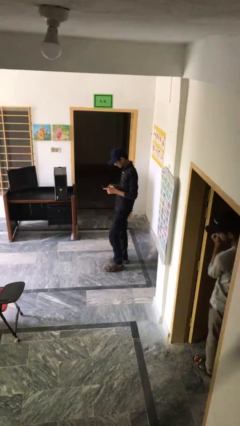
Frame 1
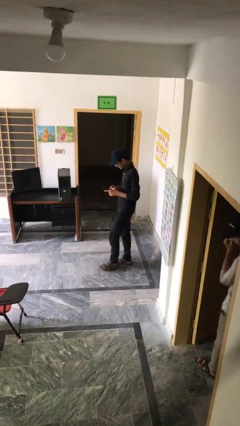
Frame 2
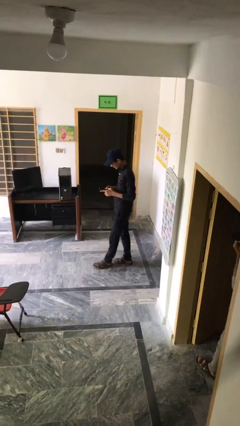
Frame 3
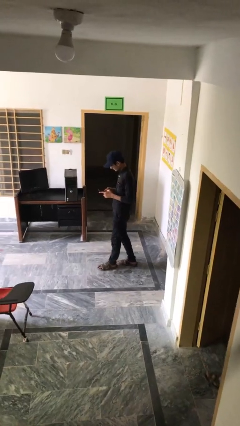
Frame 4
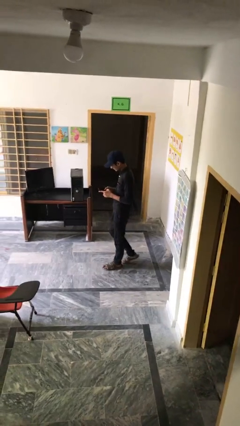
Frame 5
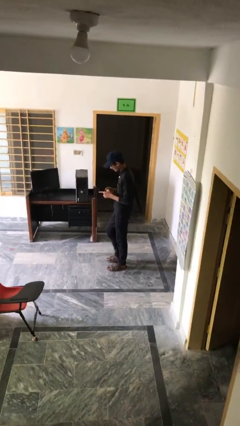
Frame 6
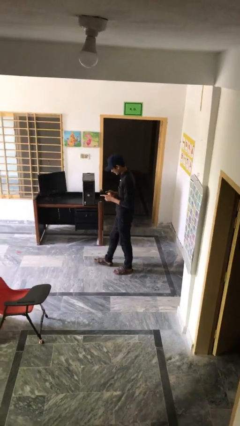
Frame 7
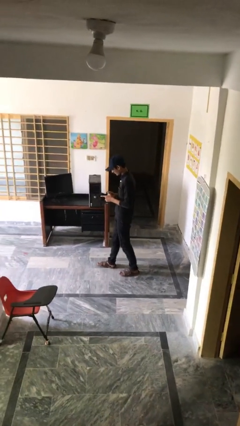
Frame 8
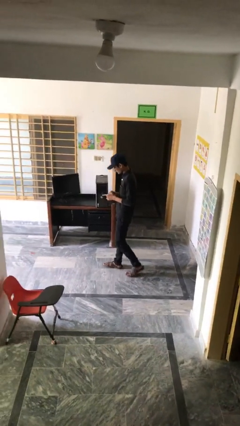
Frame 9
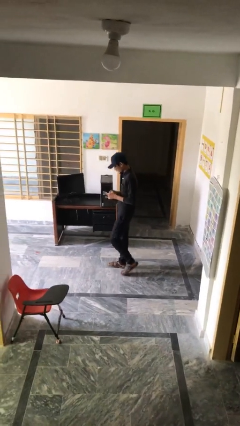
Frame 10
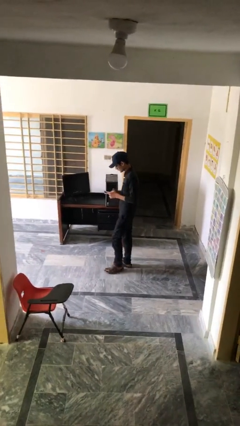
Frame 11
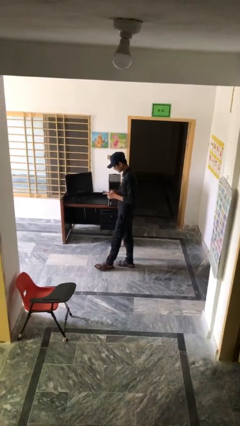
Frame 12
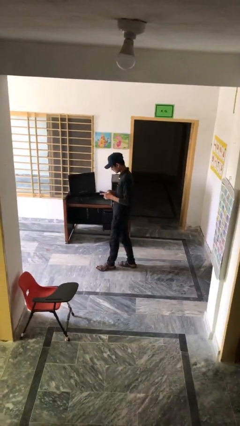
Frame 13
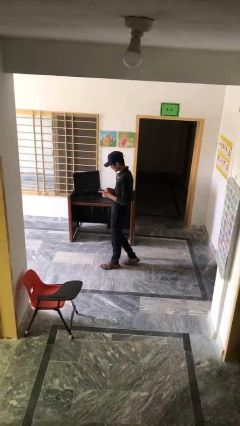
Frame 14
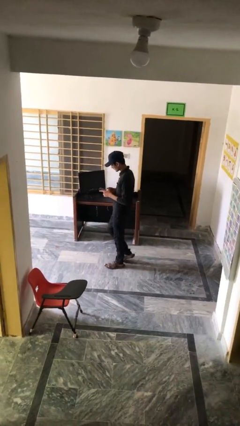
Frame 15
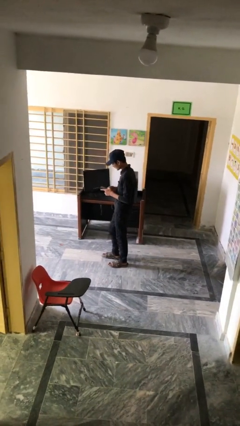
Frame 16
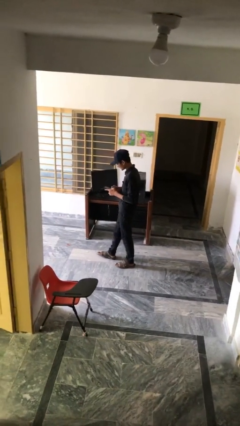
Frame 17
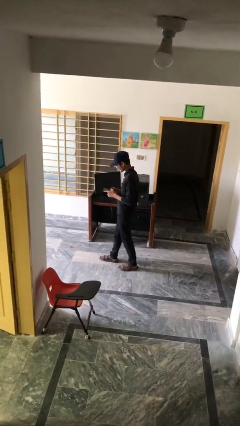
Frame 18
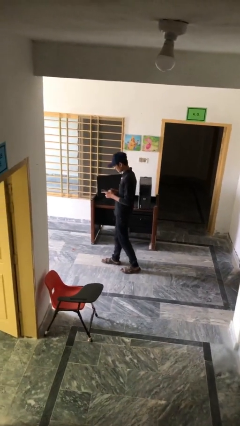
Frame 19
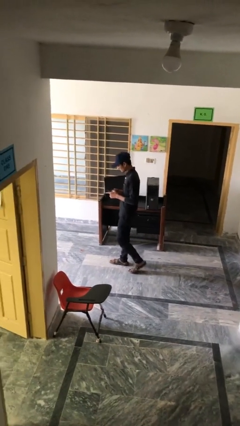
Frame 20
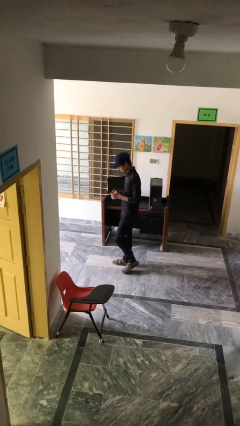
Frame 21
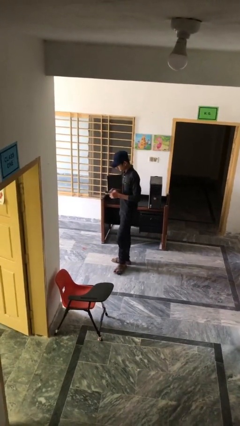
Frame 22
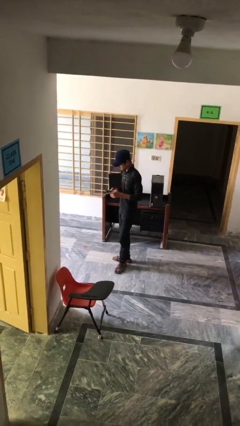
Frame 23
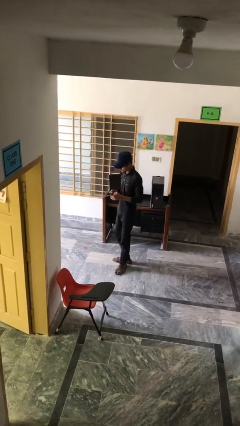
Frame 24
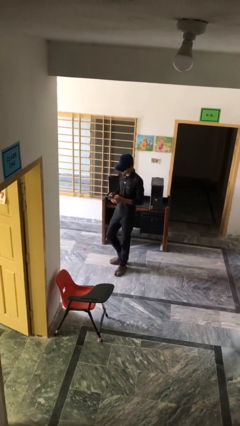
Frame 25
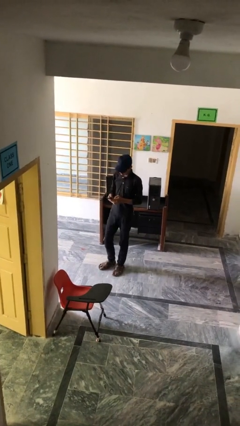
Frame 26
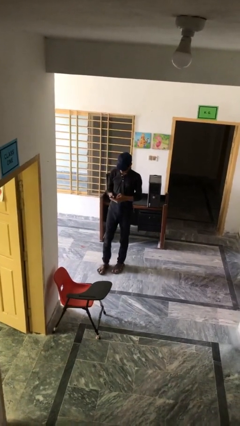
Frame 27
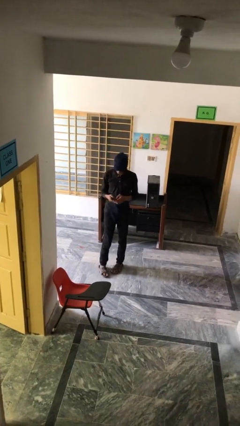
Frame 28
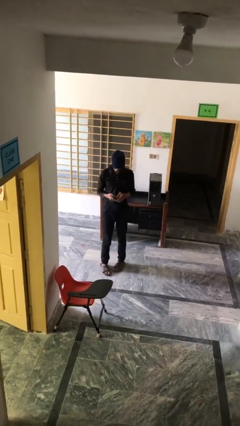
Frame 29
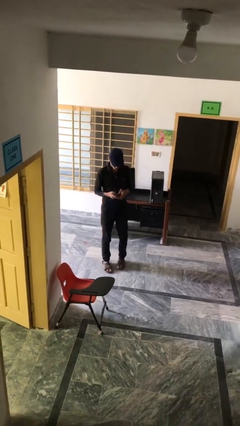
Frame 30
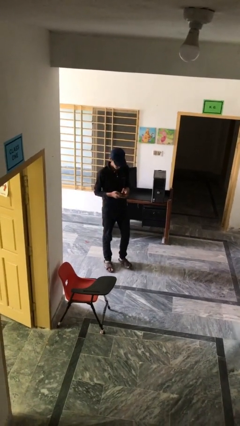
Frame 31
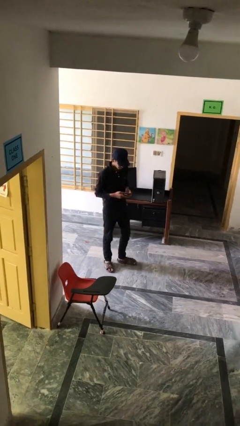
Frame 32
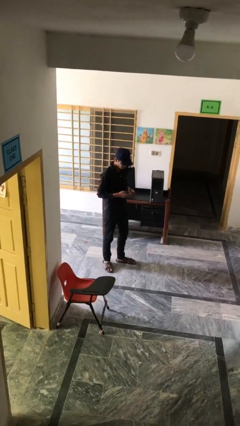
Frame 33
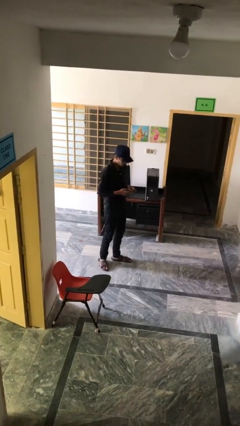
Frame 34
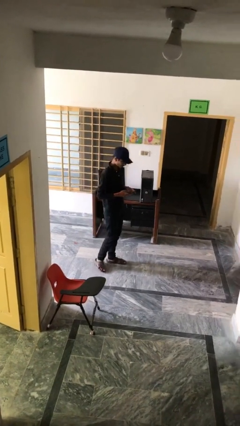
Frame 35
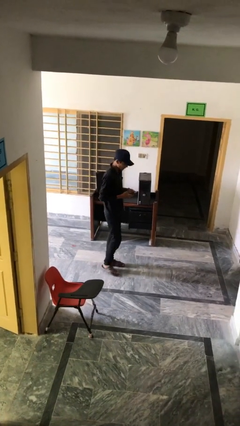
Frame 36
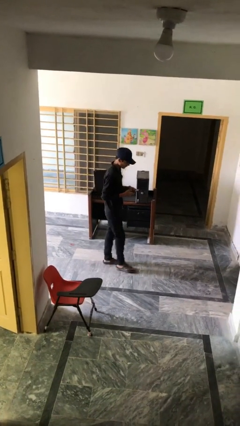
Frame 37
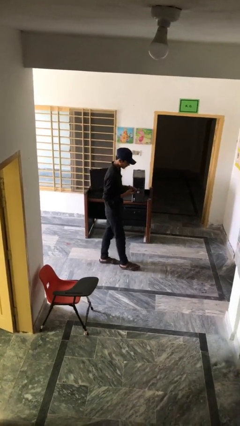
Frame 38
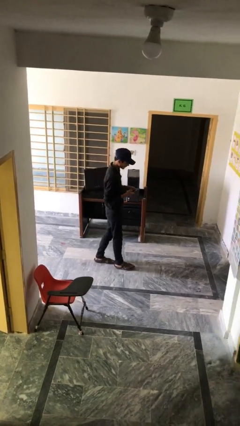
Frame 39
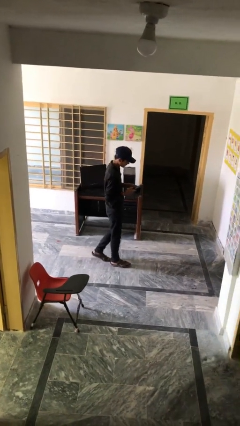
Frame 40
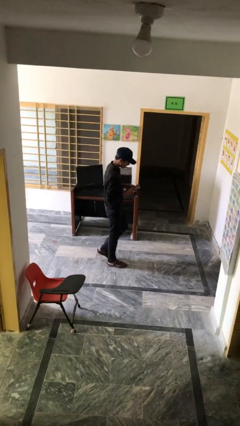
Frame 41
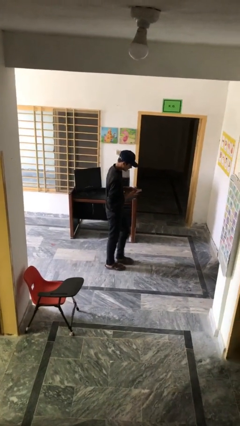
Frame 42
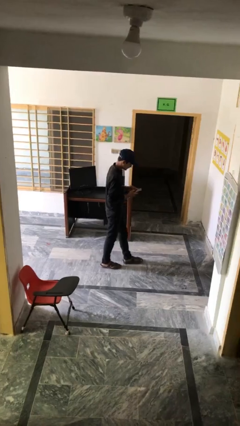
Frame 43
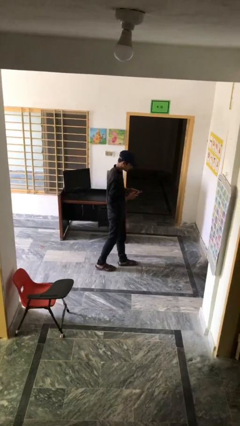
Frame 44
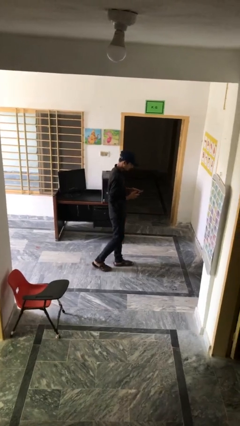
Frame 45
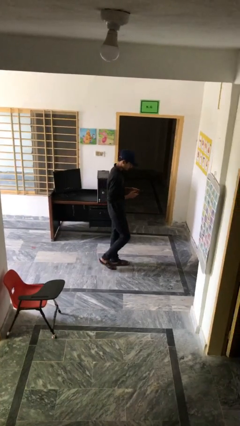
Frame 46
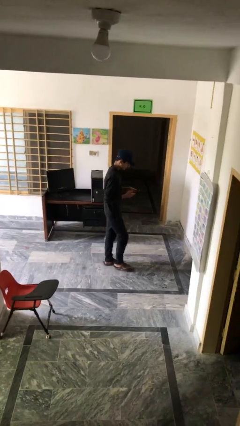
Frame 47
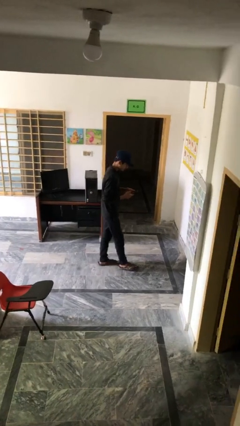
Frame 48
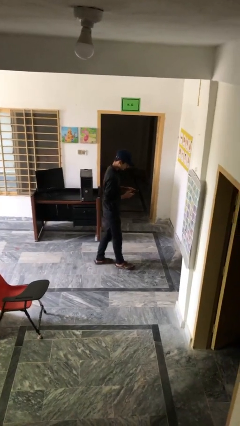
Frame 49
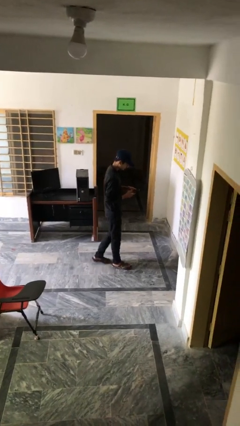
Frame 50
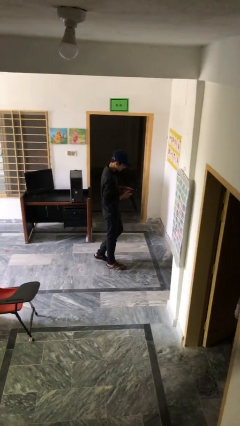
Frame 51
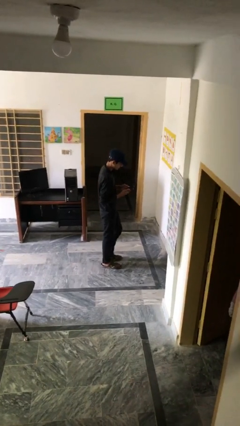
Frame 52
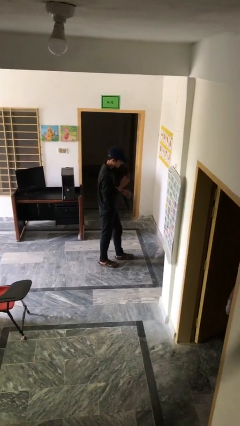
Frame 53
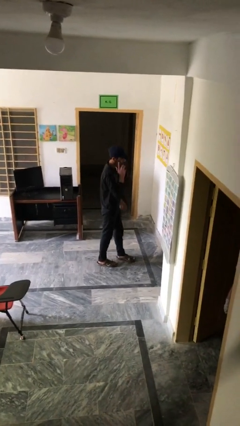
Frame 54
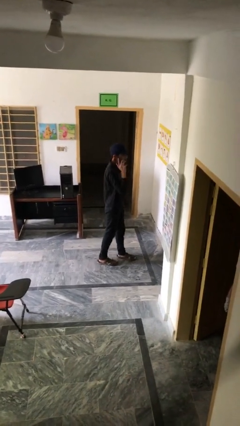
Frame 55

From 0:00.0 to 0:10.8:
person texts on phone

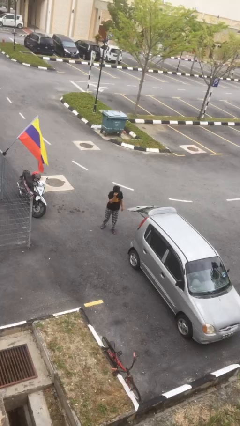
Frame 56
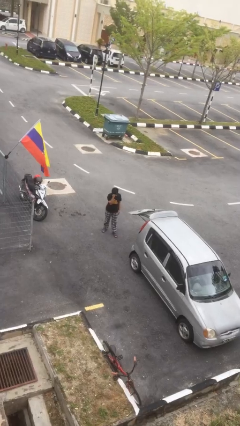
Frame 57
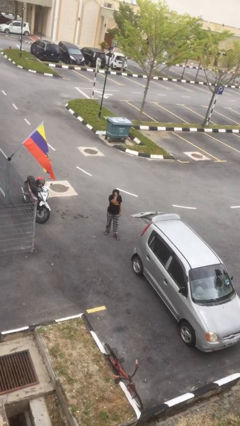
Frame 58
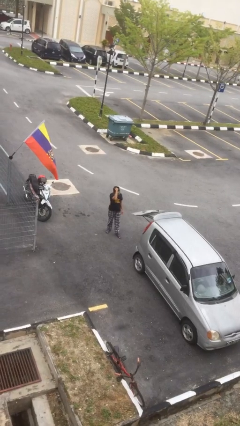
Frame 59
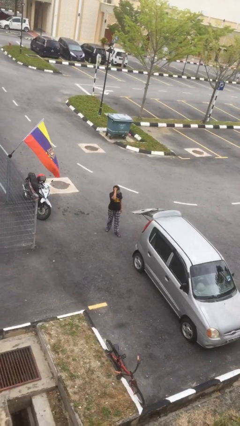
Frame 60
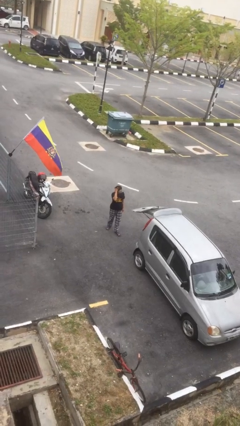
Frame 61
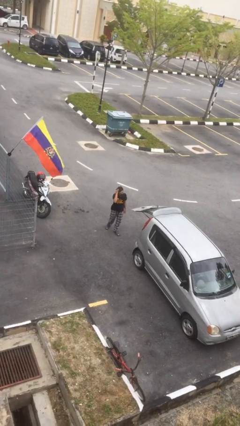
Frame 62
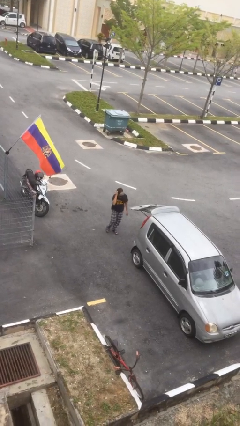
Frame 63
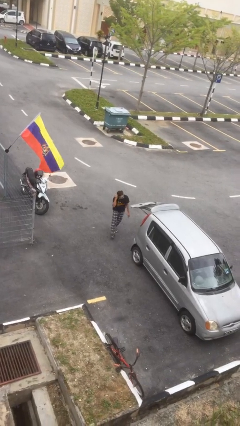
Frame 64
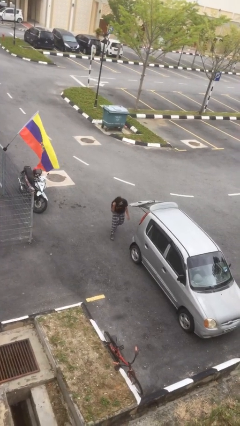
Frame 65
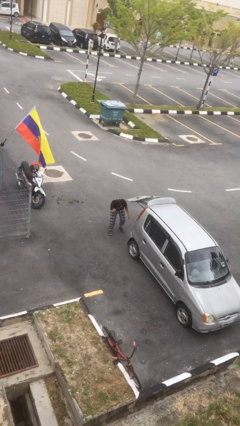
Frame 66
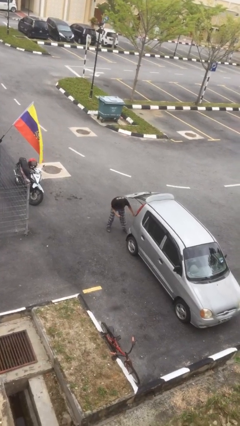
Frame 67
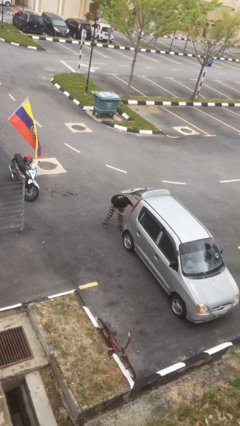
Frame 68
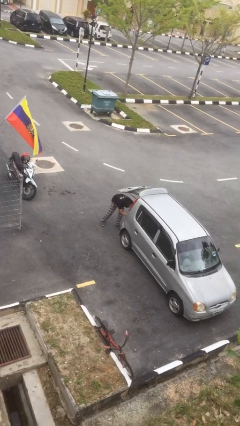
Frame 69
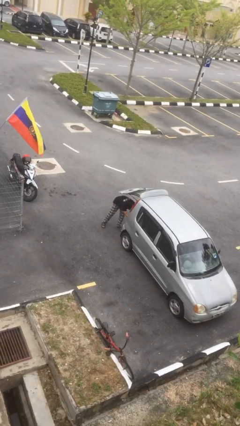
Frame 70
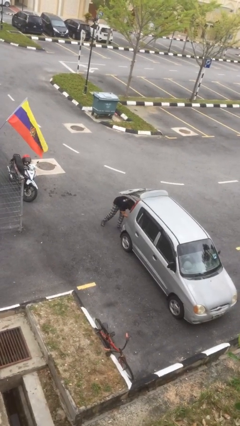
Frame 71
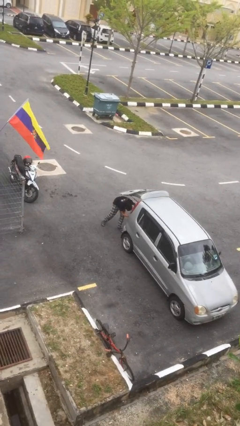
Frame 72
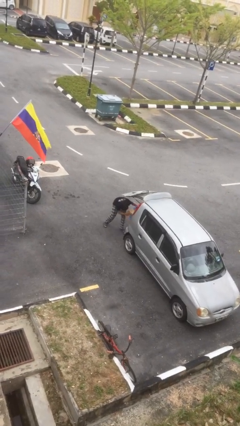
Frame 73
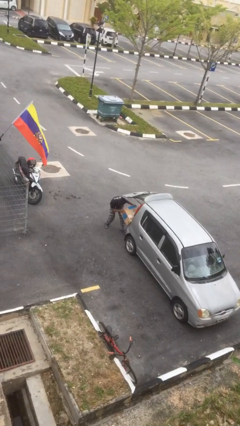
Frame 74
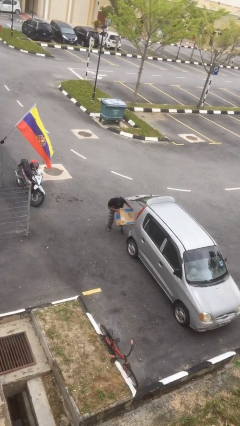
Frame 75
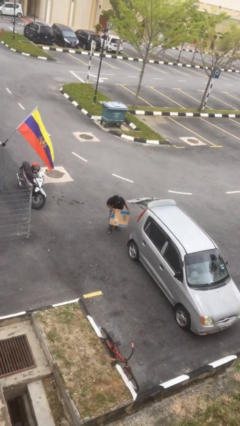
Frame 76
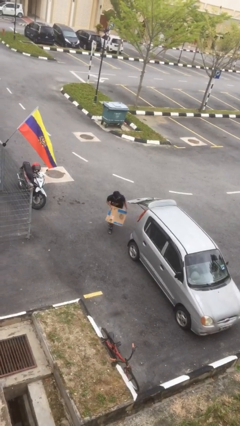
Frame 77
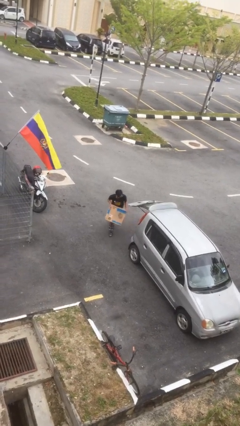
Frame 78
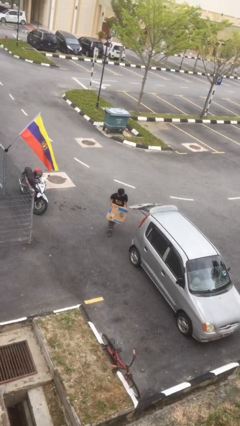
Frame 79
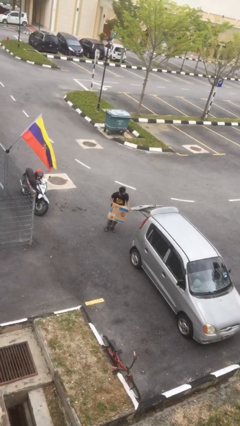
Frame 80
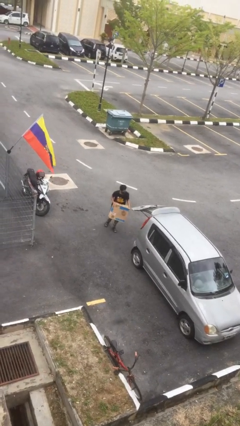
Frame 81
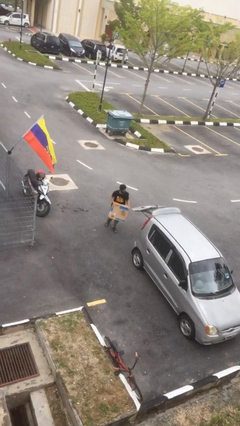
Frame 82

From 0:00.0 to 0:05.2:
person unloads car

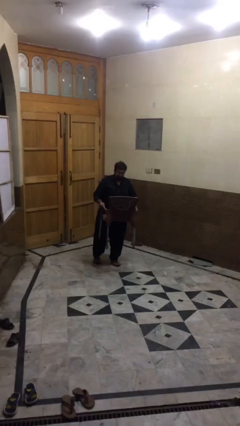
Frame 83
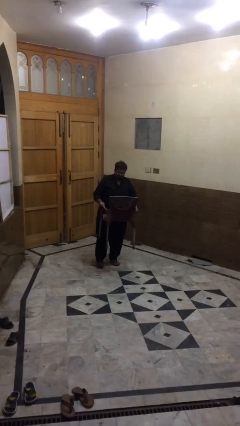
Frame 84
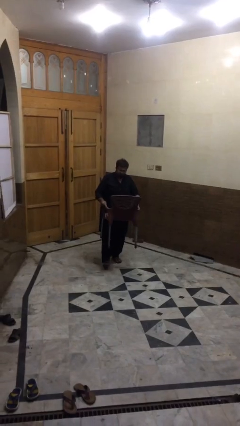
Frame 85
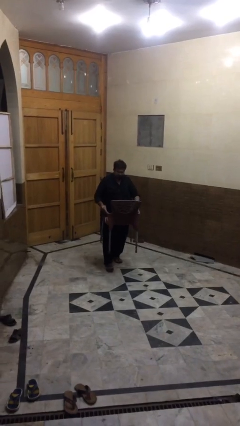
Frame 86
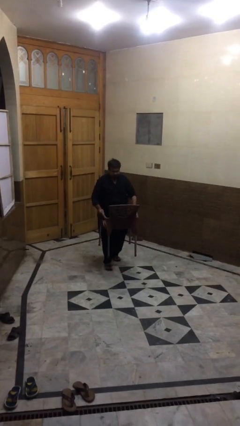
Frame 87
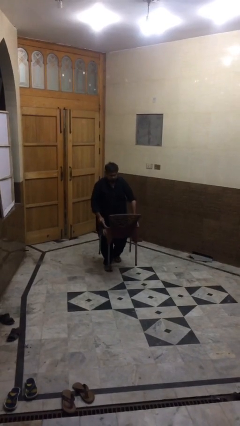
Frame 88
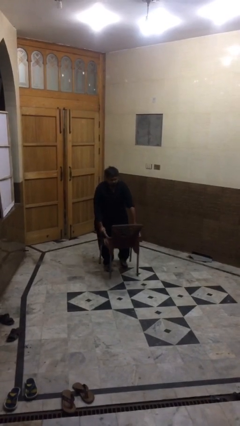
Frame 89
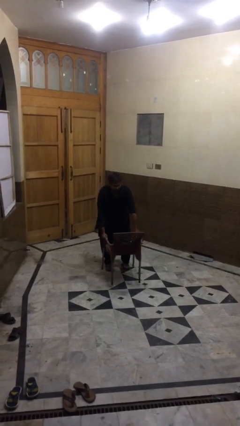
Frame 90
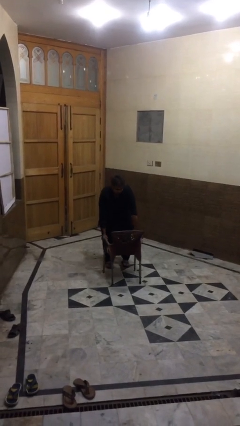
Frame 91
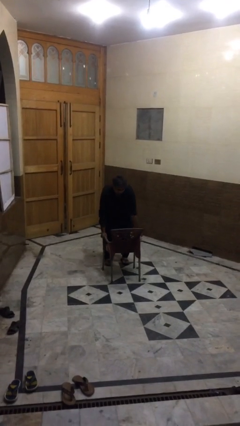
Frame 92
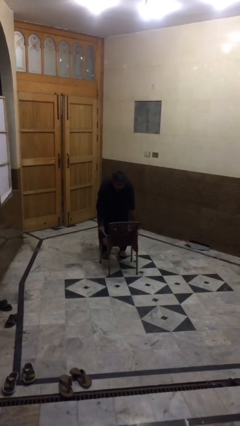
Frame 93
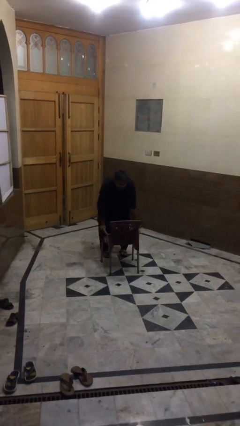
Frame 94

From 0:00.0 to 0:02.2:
person puts down object on floor
